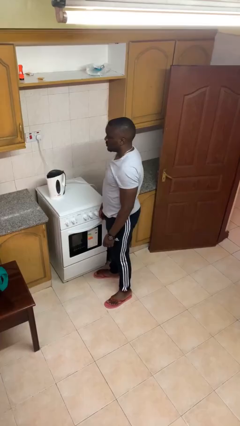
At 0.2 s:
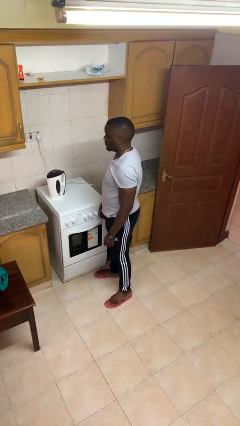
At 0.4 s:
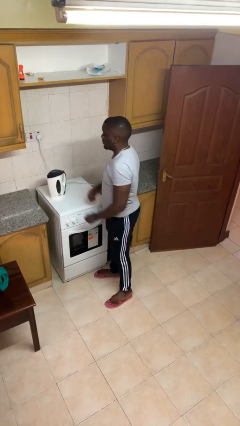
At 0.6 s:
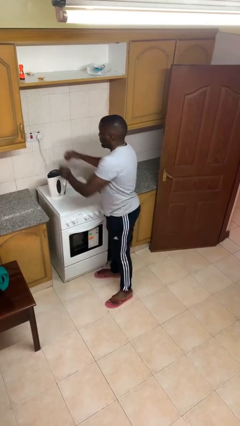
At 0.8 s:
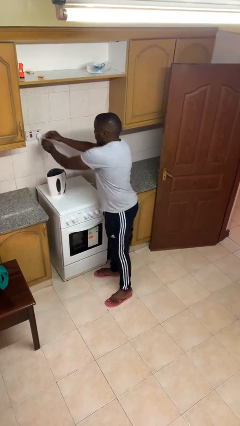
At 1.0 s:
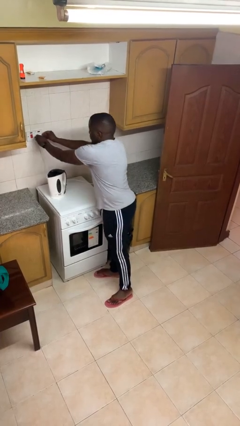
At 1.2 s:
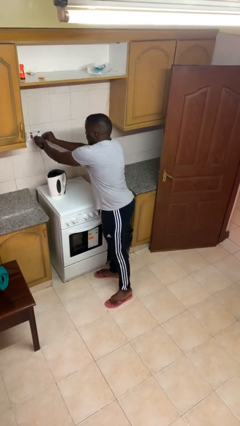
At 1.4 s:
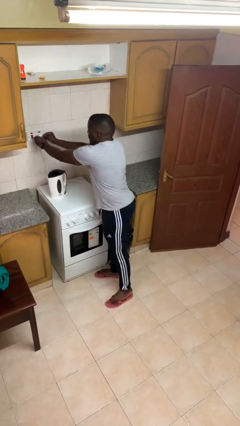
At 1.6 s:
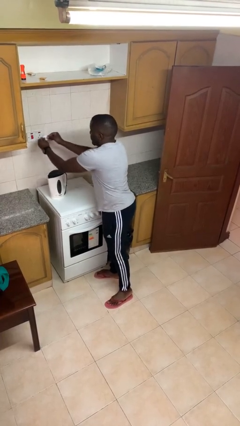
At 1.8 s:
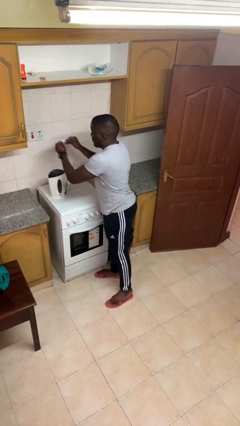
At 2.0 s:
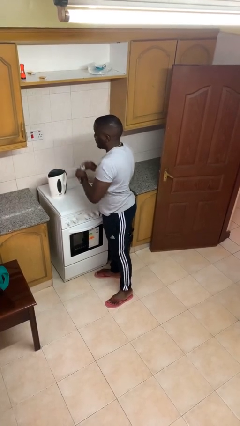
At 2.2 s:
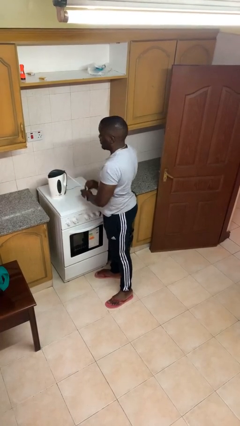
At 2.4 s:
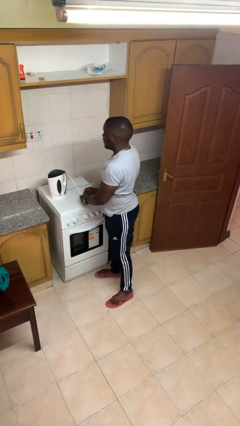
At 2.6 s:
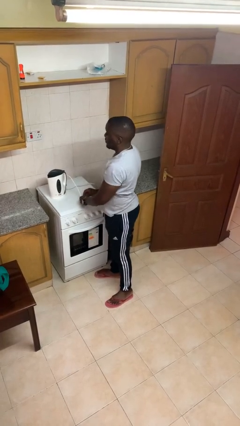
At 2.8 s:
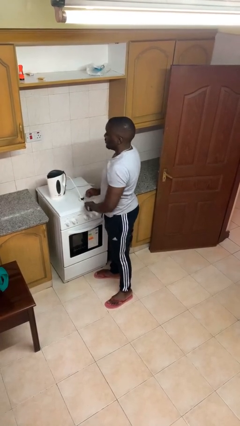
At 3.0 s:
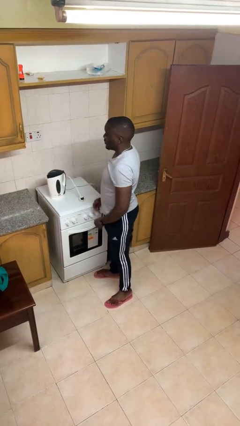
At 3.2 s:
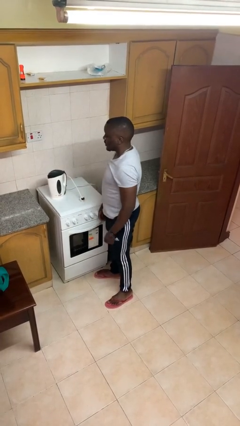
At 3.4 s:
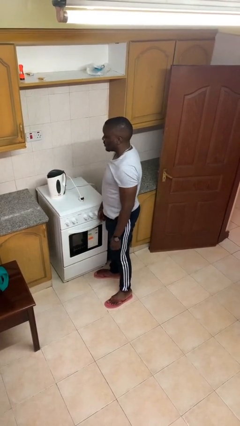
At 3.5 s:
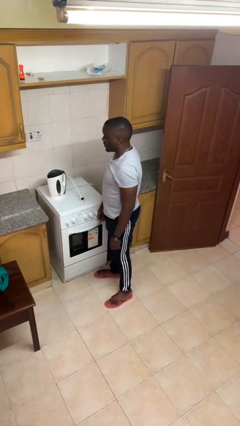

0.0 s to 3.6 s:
person unplugs from electrical socket

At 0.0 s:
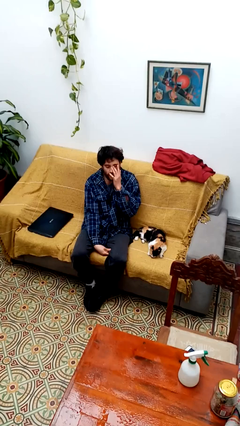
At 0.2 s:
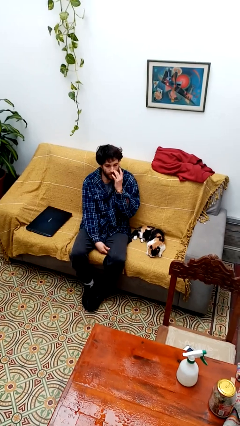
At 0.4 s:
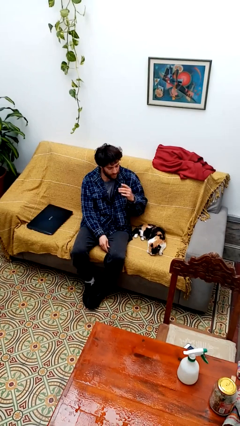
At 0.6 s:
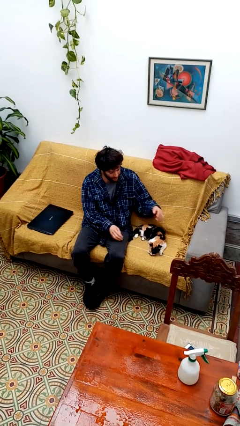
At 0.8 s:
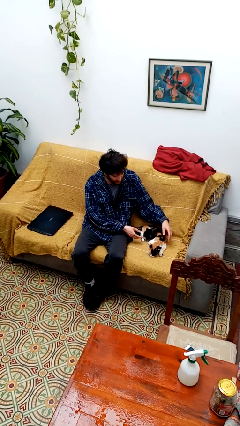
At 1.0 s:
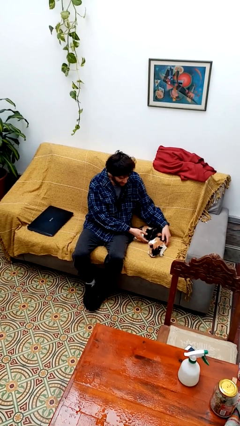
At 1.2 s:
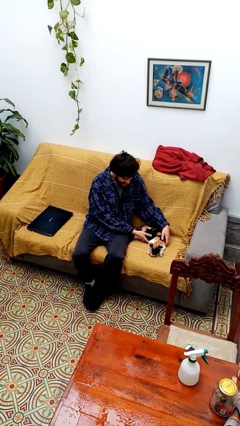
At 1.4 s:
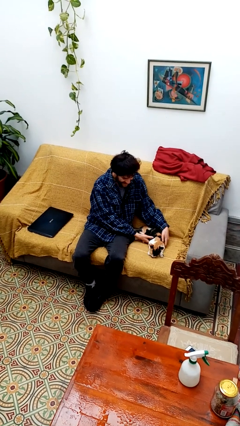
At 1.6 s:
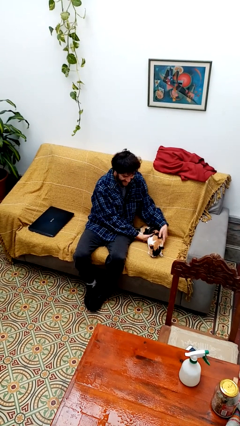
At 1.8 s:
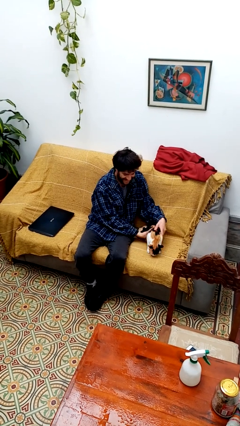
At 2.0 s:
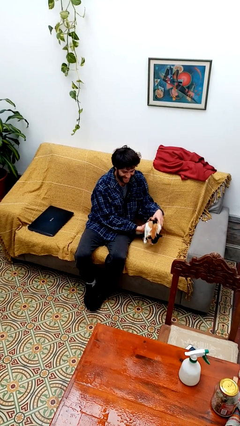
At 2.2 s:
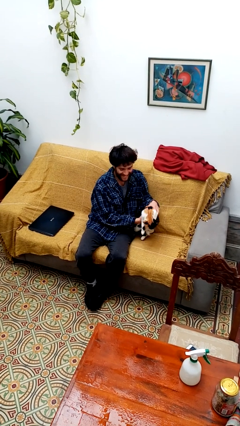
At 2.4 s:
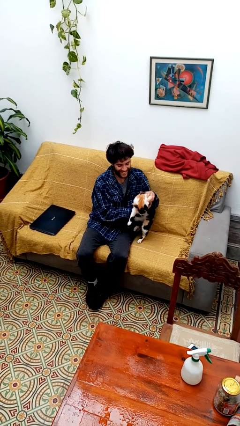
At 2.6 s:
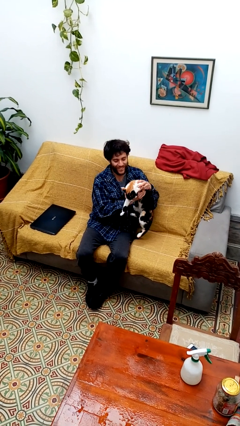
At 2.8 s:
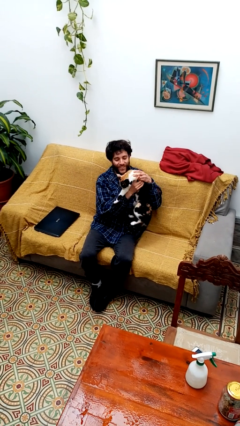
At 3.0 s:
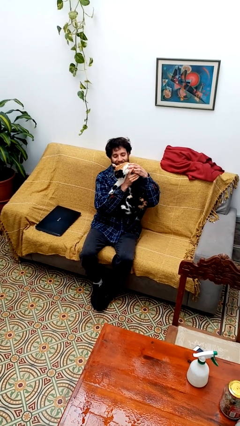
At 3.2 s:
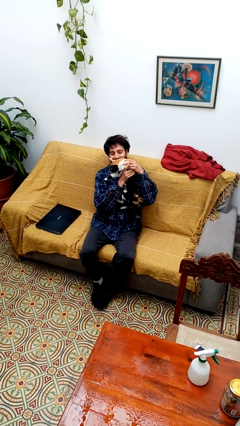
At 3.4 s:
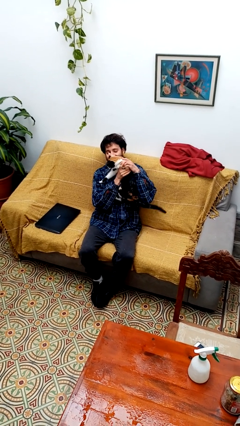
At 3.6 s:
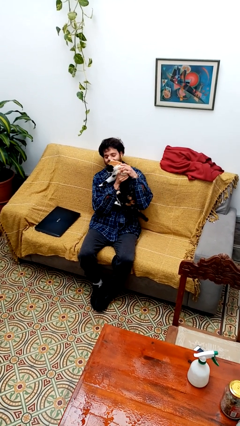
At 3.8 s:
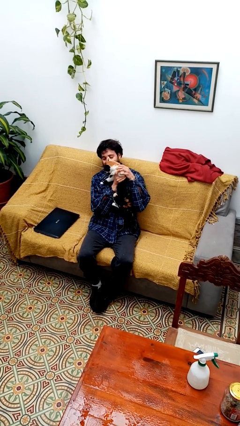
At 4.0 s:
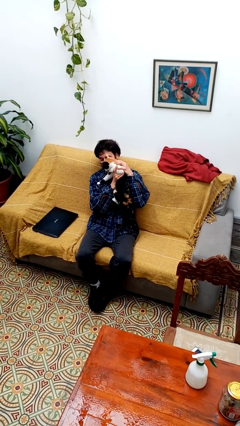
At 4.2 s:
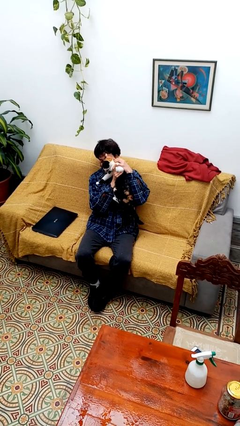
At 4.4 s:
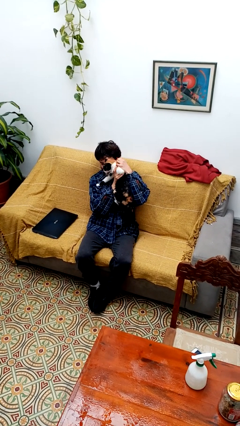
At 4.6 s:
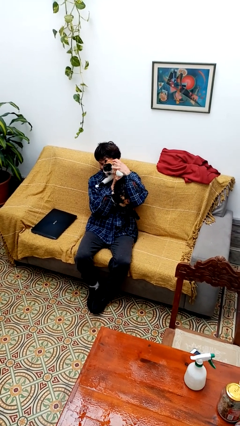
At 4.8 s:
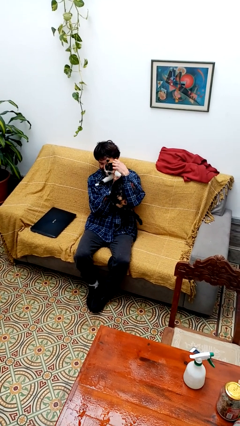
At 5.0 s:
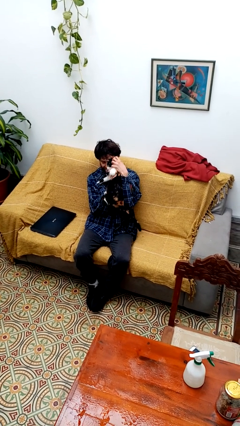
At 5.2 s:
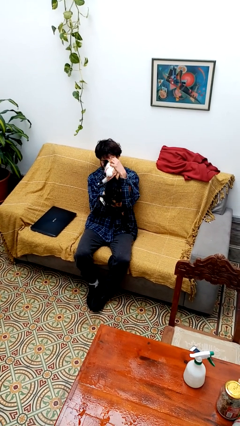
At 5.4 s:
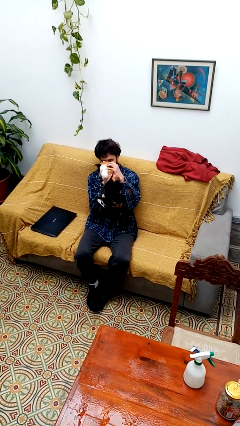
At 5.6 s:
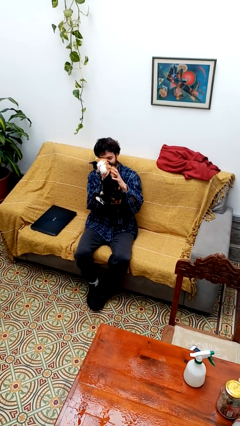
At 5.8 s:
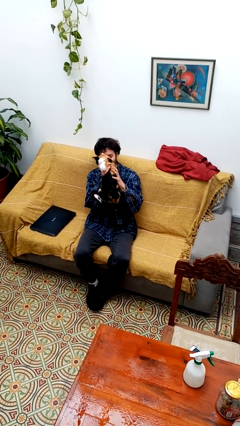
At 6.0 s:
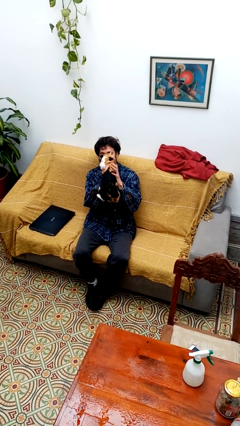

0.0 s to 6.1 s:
person hugs cat

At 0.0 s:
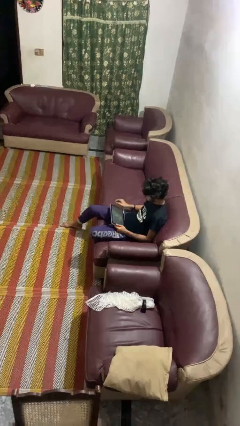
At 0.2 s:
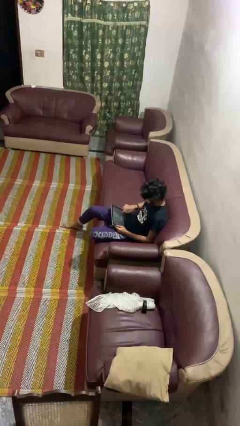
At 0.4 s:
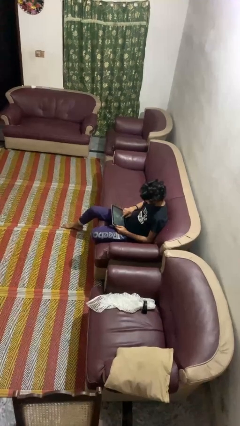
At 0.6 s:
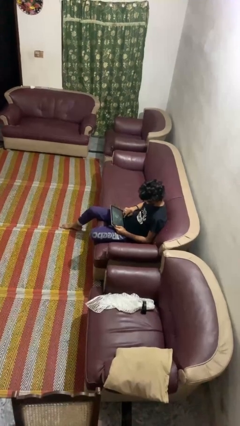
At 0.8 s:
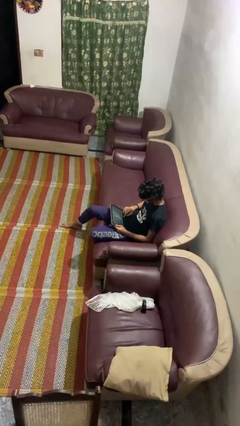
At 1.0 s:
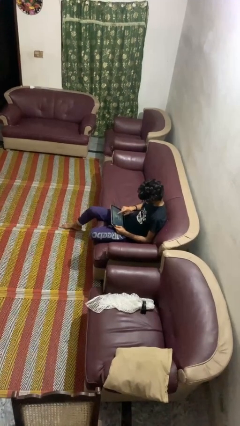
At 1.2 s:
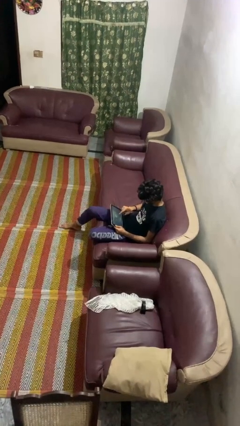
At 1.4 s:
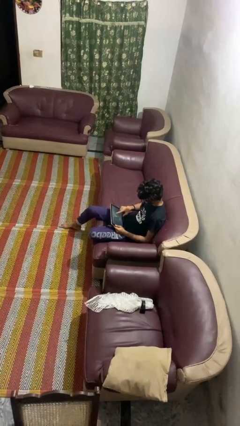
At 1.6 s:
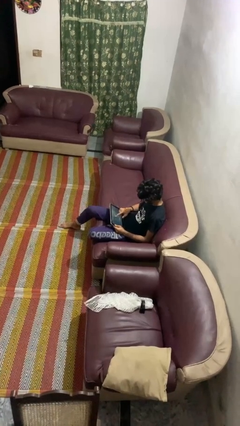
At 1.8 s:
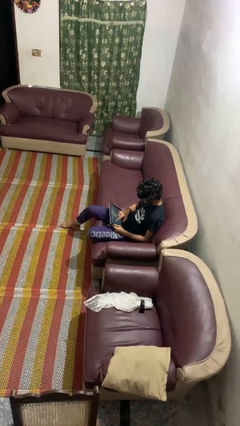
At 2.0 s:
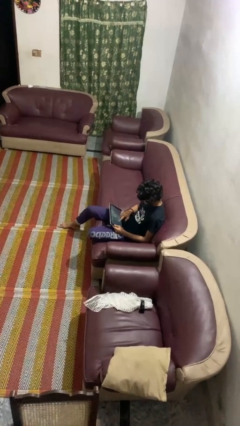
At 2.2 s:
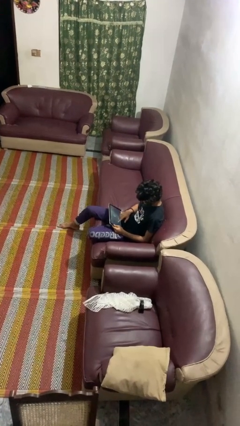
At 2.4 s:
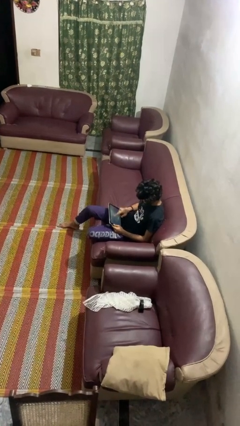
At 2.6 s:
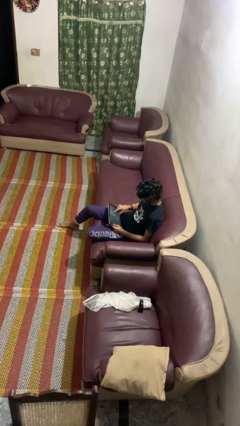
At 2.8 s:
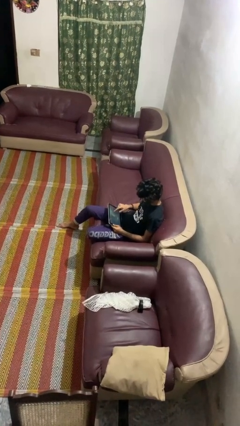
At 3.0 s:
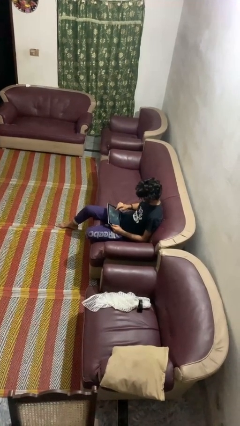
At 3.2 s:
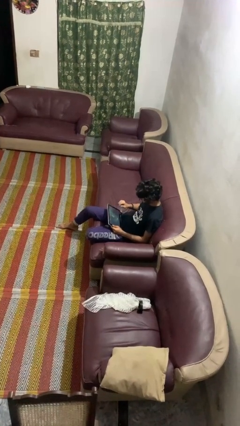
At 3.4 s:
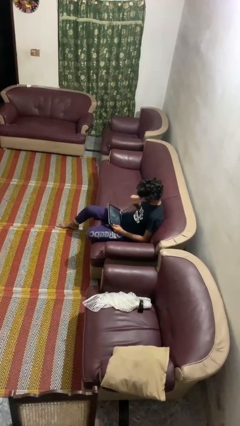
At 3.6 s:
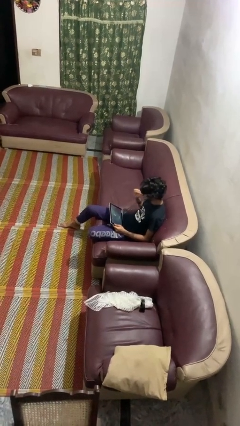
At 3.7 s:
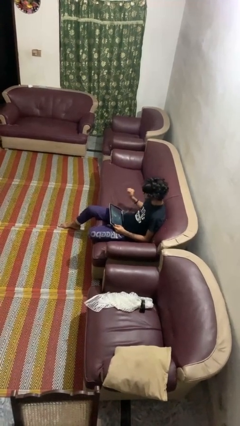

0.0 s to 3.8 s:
person interacts with tablet

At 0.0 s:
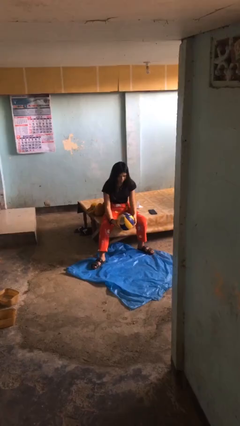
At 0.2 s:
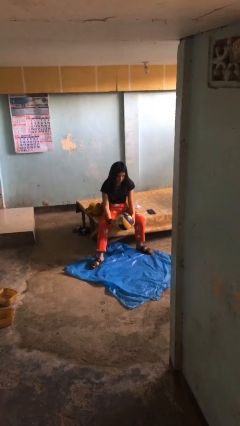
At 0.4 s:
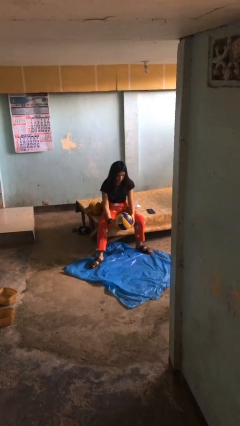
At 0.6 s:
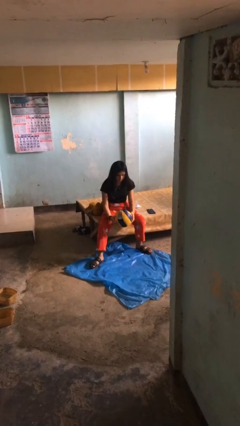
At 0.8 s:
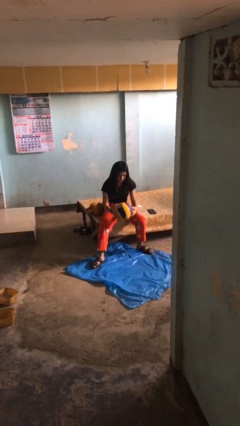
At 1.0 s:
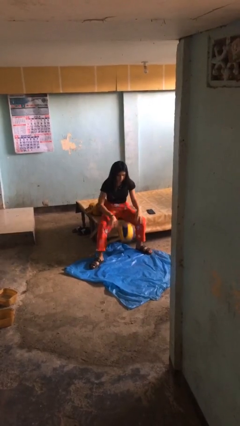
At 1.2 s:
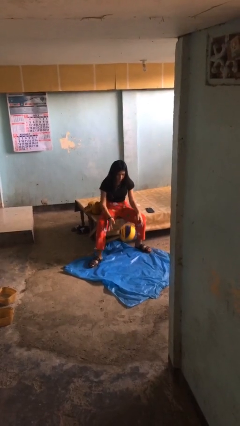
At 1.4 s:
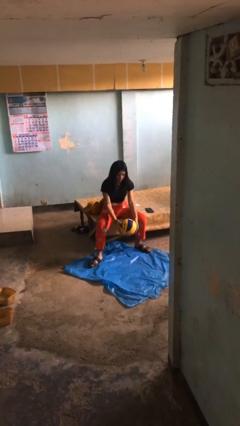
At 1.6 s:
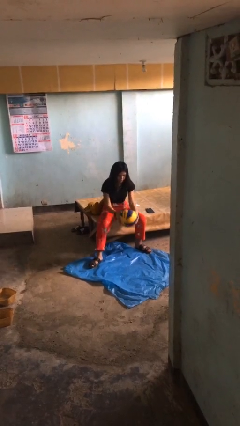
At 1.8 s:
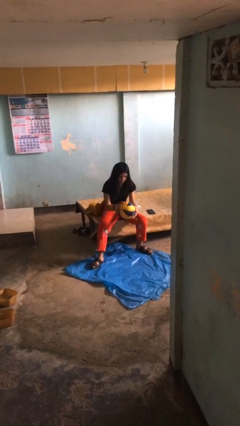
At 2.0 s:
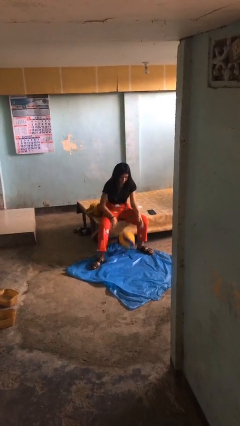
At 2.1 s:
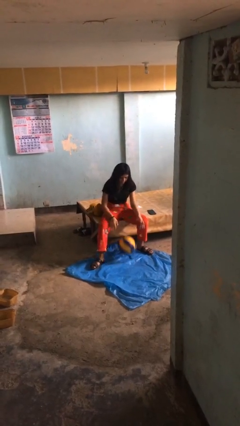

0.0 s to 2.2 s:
person bounces ball on floor

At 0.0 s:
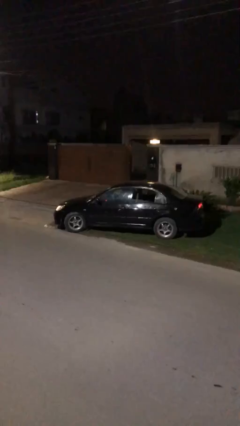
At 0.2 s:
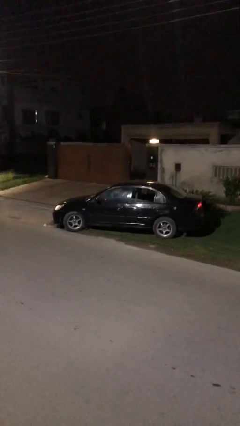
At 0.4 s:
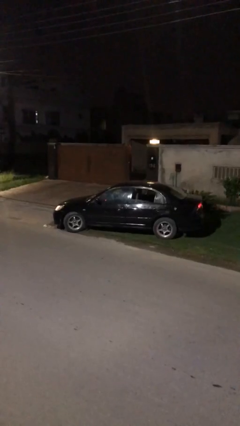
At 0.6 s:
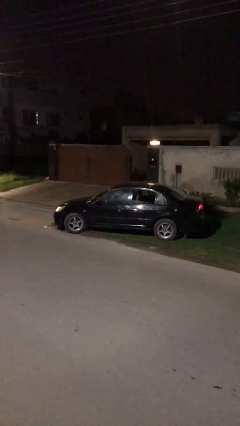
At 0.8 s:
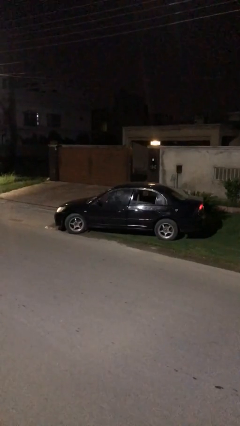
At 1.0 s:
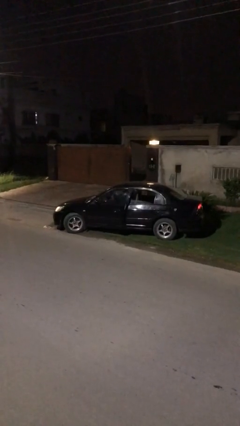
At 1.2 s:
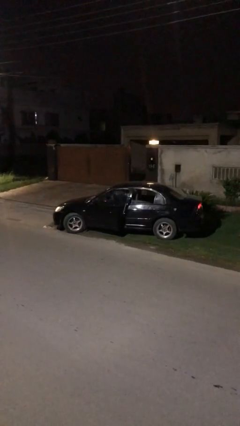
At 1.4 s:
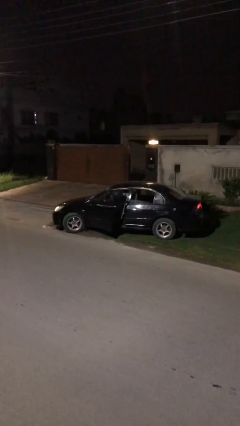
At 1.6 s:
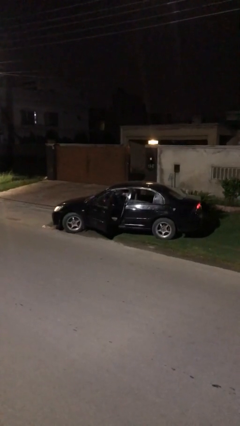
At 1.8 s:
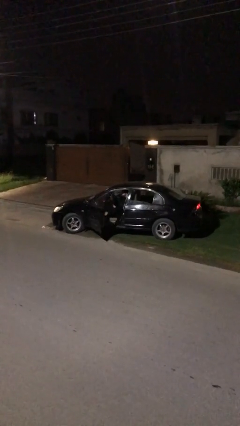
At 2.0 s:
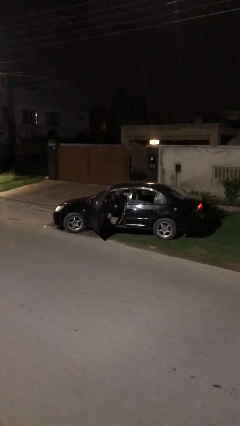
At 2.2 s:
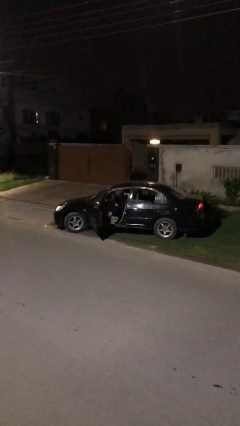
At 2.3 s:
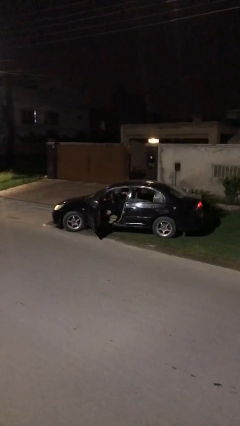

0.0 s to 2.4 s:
person opens car door
